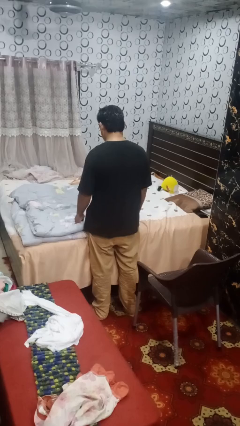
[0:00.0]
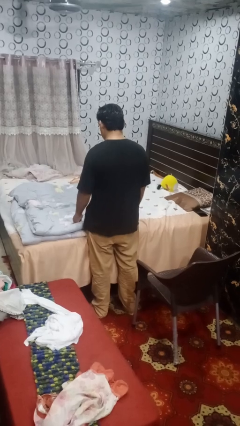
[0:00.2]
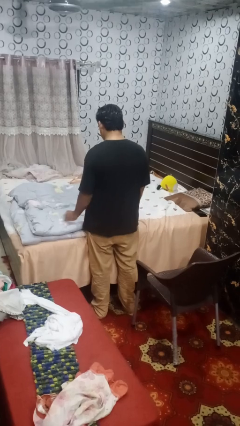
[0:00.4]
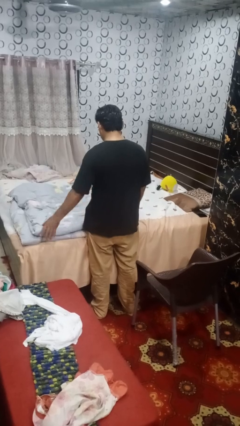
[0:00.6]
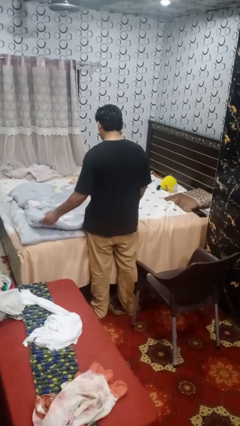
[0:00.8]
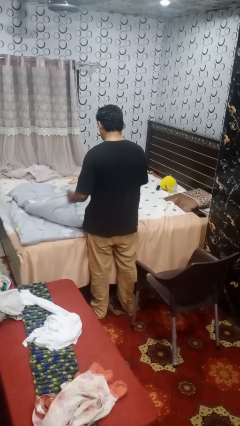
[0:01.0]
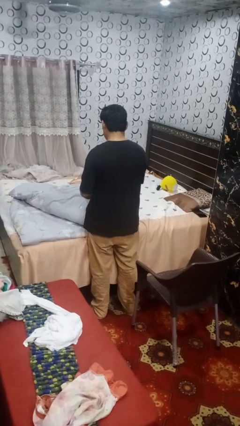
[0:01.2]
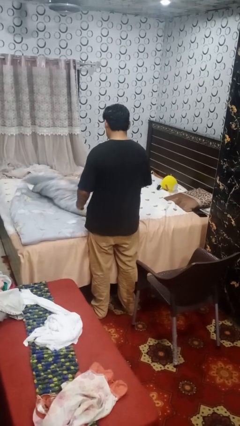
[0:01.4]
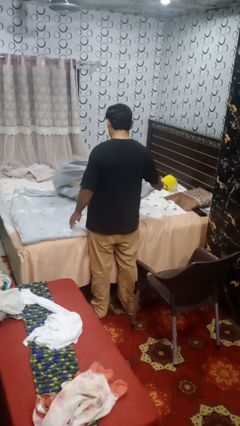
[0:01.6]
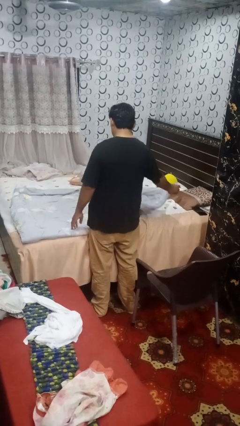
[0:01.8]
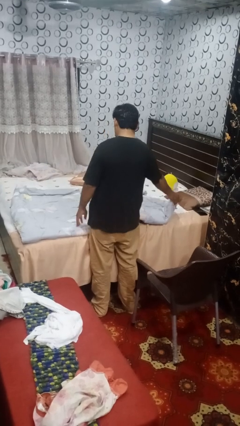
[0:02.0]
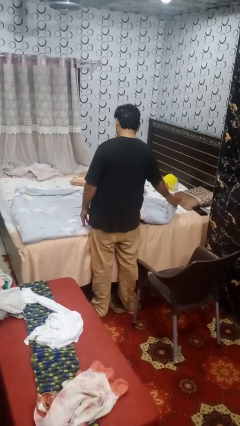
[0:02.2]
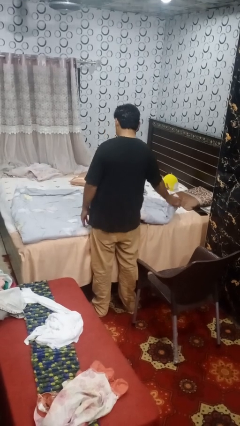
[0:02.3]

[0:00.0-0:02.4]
person unfolds blanket

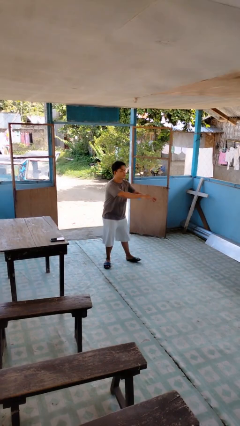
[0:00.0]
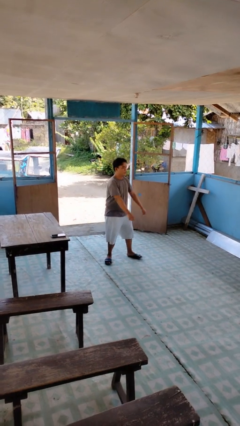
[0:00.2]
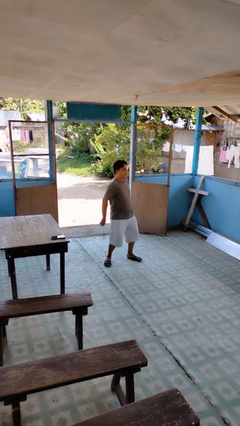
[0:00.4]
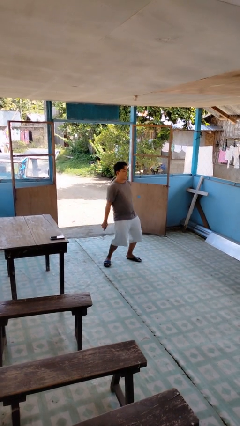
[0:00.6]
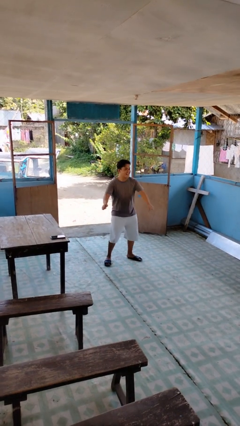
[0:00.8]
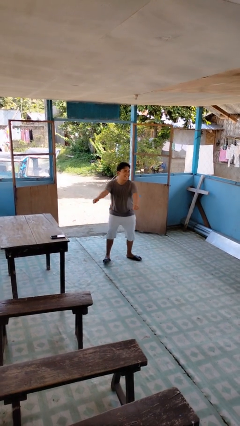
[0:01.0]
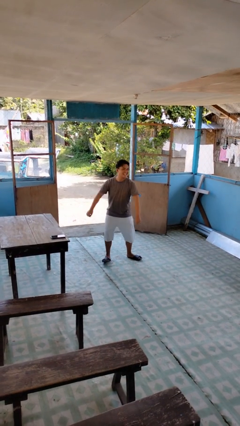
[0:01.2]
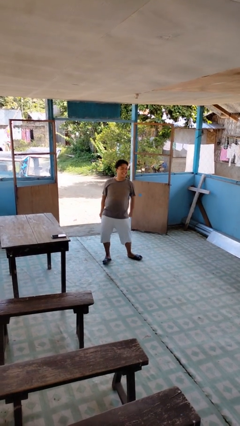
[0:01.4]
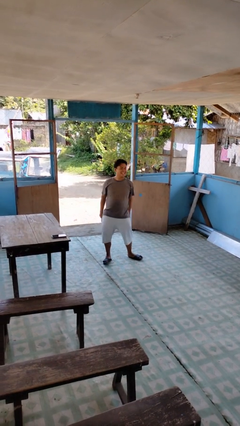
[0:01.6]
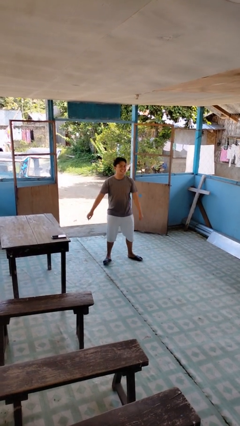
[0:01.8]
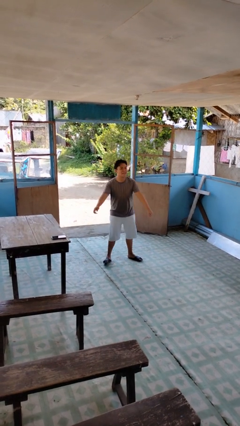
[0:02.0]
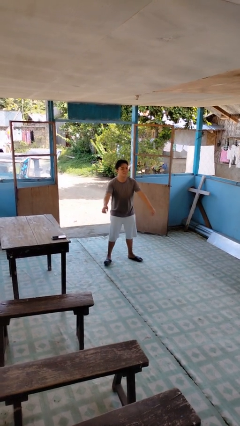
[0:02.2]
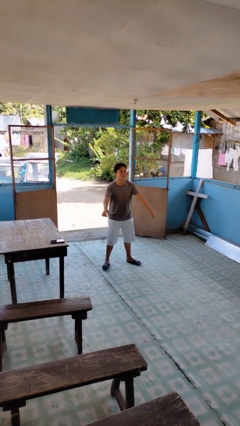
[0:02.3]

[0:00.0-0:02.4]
person dances in place

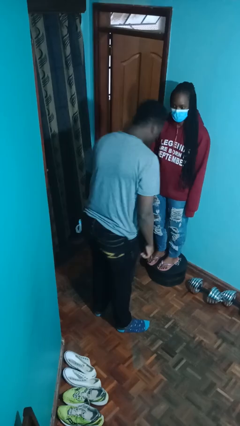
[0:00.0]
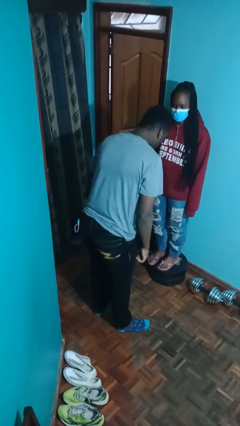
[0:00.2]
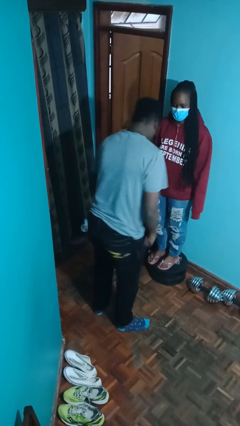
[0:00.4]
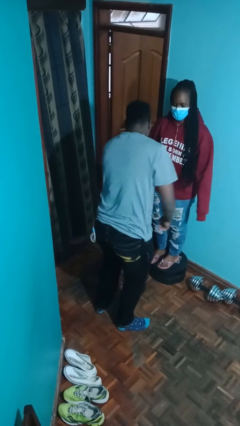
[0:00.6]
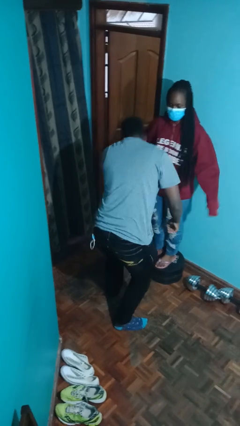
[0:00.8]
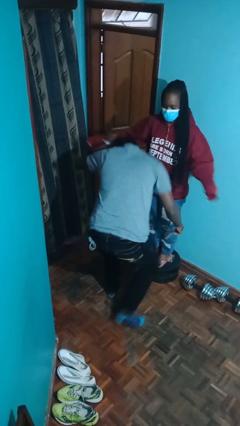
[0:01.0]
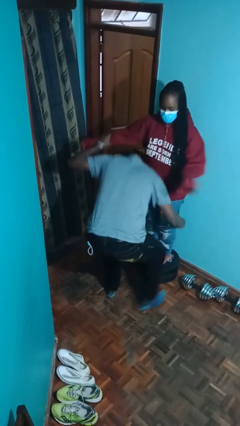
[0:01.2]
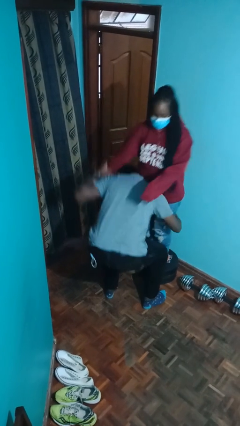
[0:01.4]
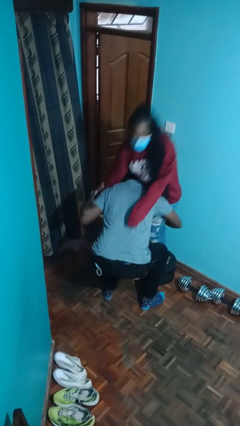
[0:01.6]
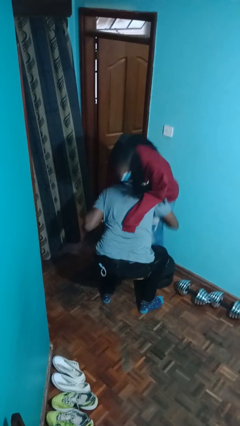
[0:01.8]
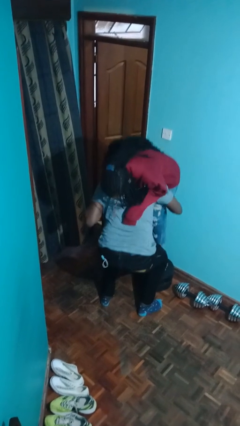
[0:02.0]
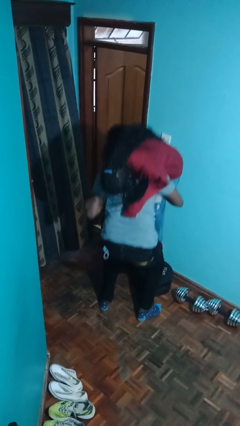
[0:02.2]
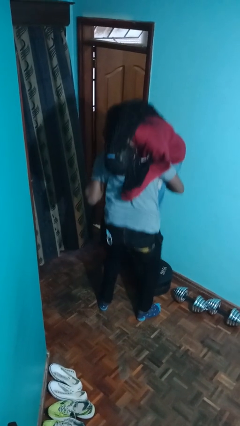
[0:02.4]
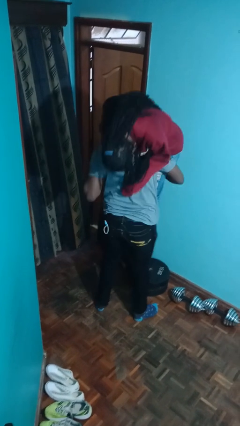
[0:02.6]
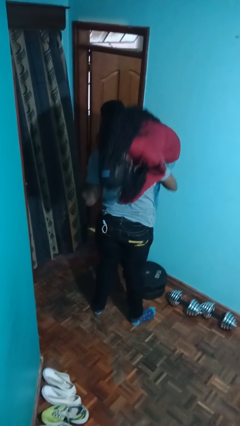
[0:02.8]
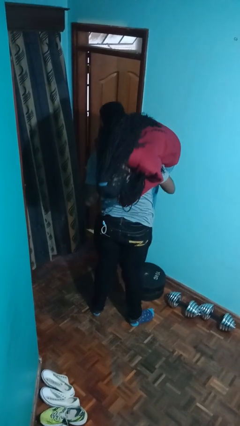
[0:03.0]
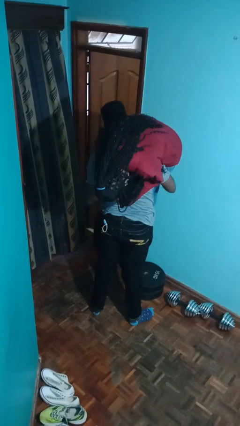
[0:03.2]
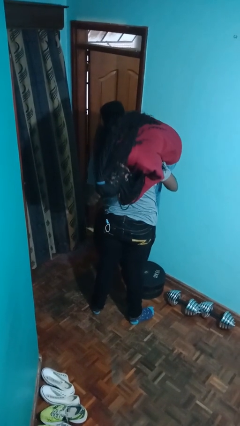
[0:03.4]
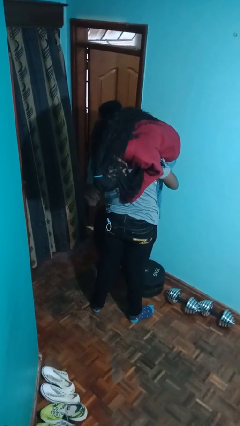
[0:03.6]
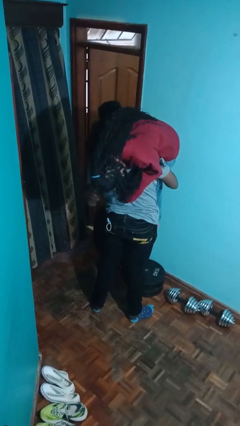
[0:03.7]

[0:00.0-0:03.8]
person carries person over shoulder

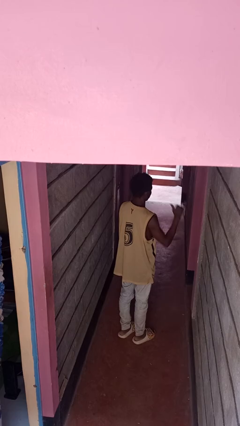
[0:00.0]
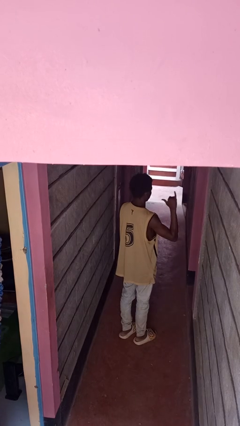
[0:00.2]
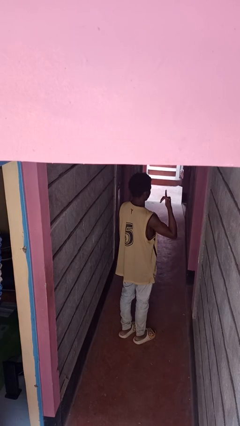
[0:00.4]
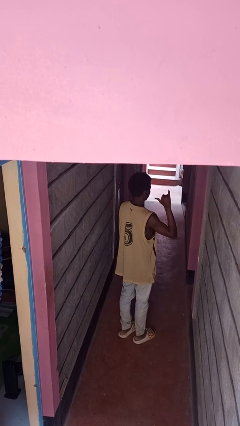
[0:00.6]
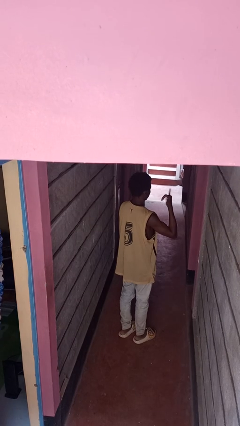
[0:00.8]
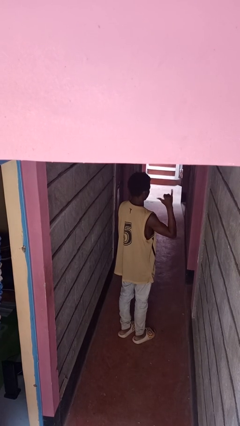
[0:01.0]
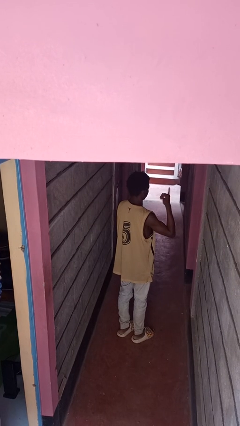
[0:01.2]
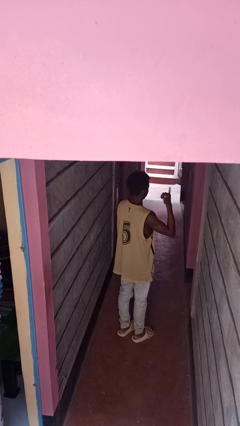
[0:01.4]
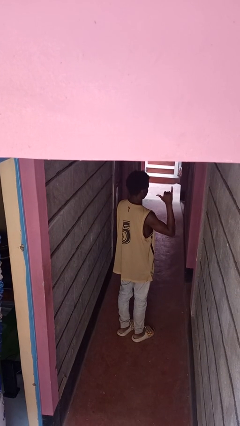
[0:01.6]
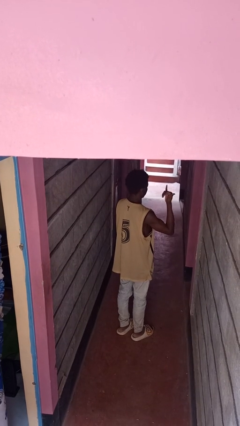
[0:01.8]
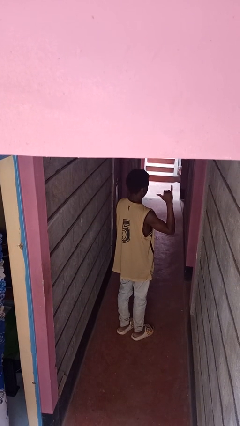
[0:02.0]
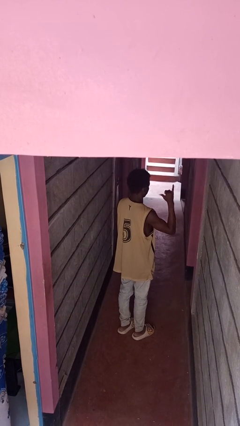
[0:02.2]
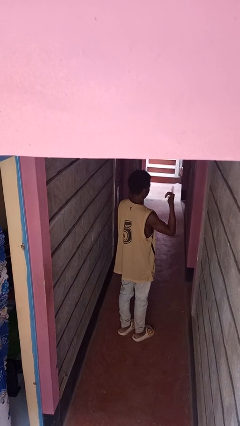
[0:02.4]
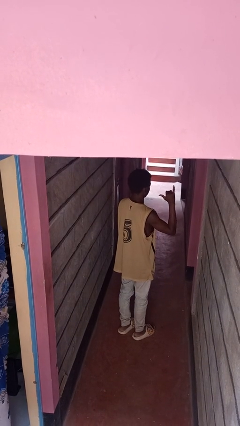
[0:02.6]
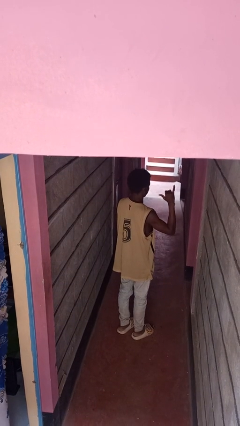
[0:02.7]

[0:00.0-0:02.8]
person gestures hang loose

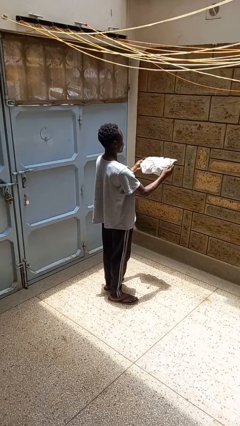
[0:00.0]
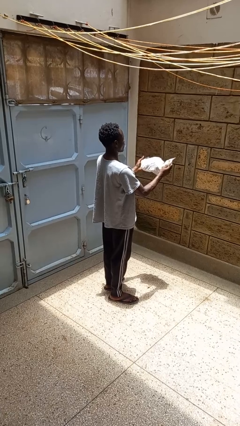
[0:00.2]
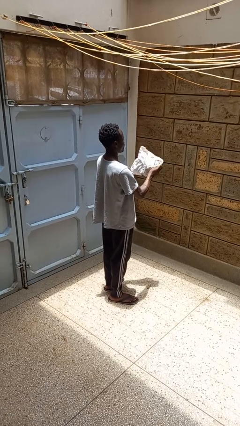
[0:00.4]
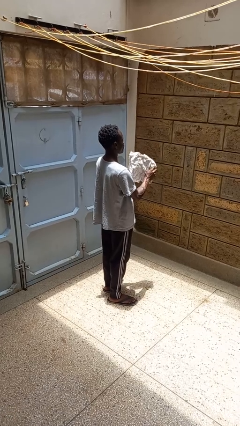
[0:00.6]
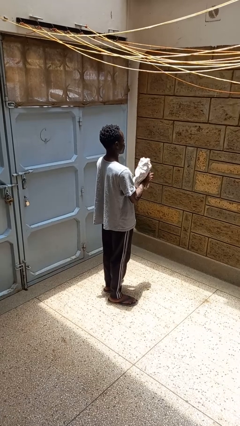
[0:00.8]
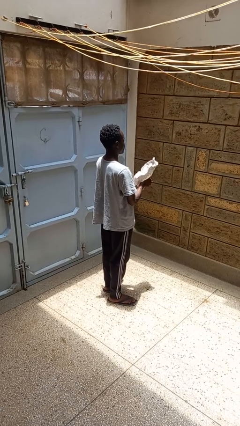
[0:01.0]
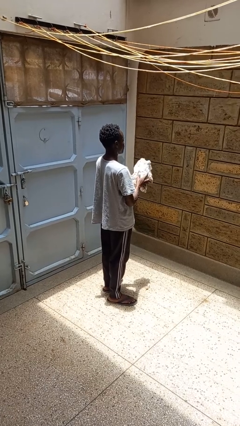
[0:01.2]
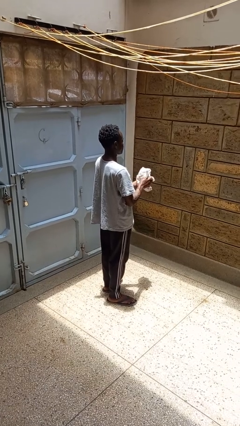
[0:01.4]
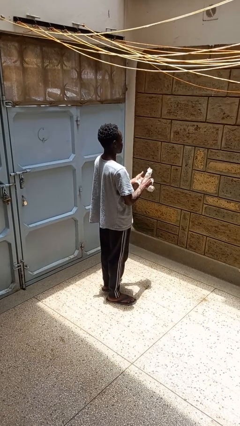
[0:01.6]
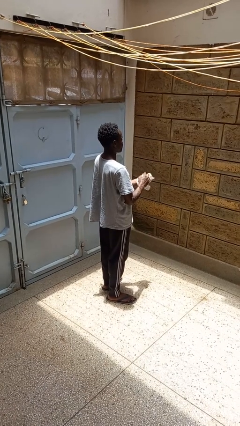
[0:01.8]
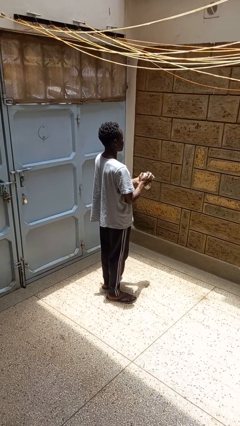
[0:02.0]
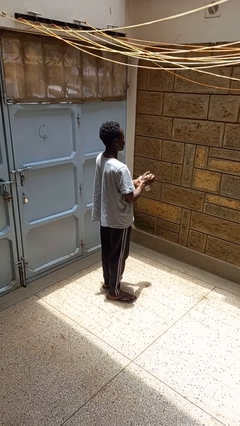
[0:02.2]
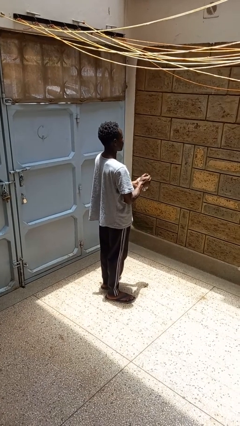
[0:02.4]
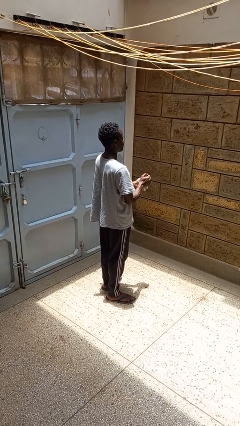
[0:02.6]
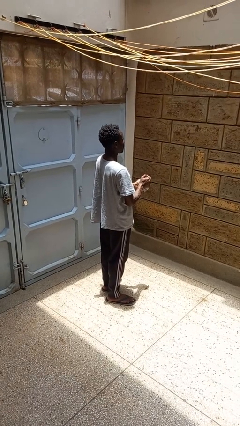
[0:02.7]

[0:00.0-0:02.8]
person crumples paper

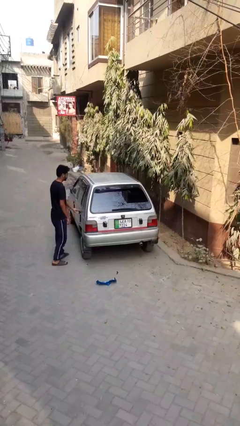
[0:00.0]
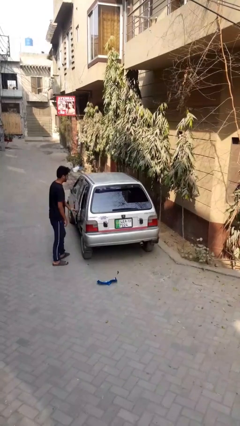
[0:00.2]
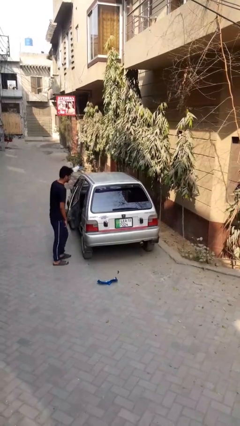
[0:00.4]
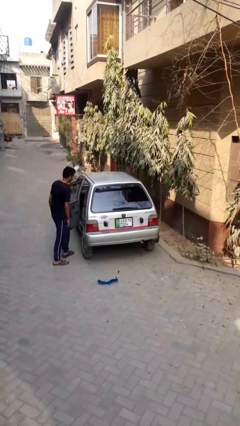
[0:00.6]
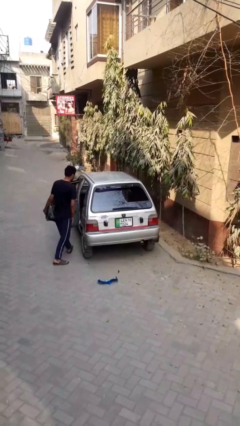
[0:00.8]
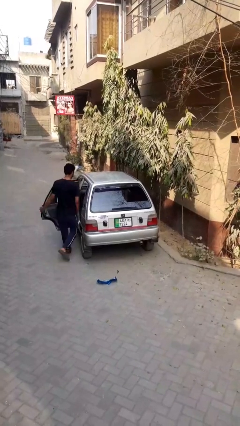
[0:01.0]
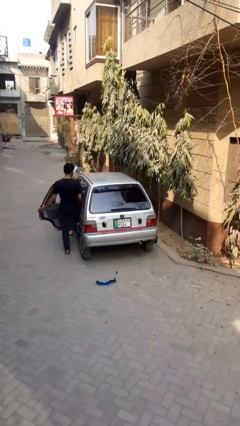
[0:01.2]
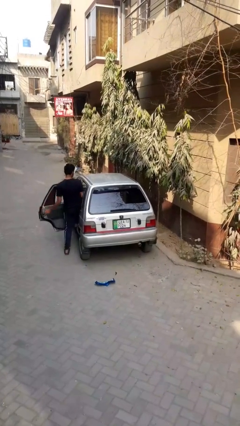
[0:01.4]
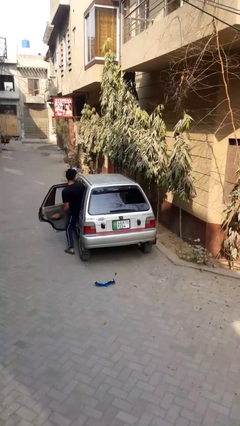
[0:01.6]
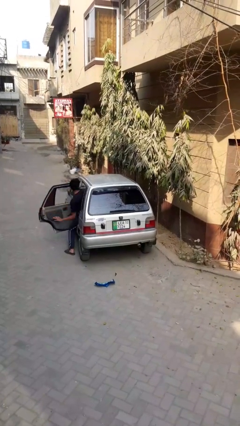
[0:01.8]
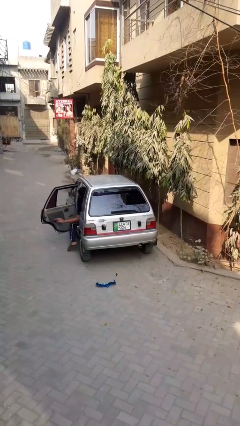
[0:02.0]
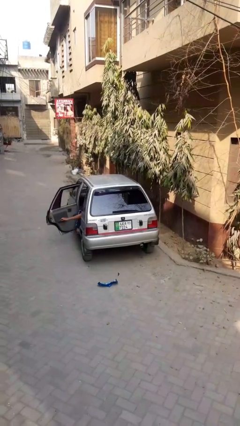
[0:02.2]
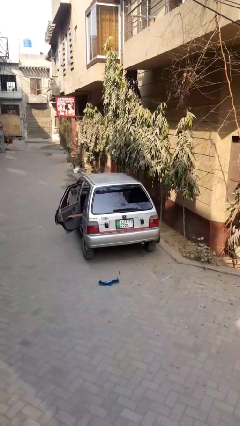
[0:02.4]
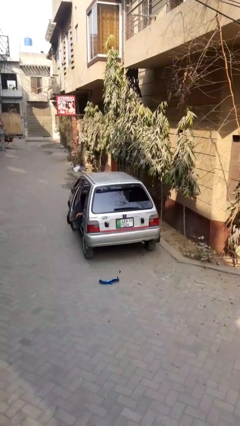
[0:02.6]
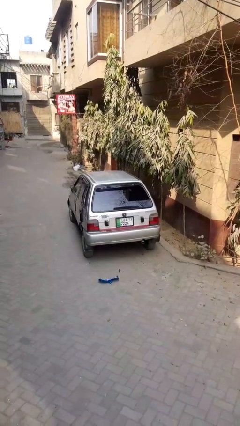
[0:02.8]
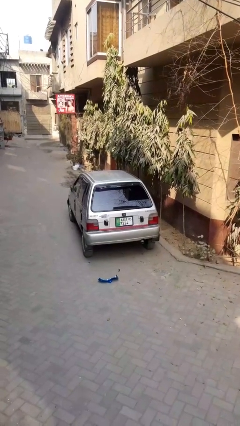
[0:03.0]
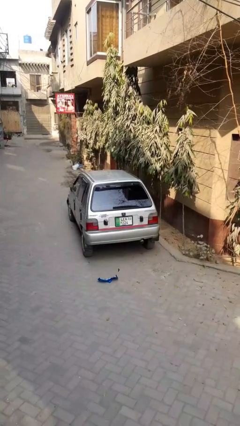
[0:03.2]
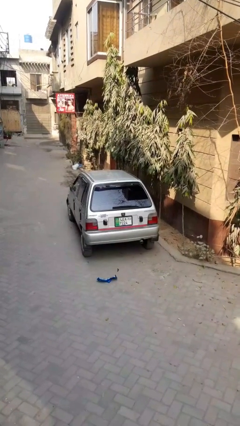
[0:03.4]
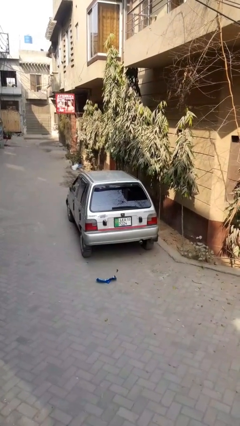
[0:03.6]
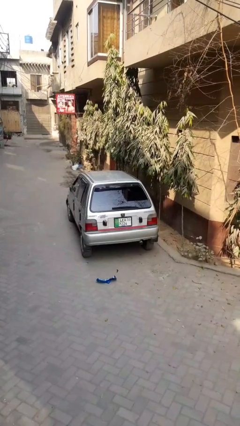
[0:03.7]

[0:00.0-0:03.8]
car picks up person
